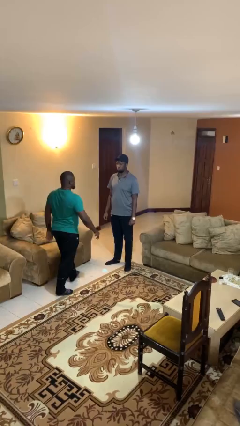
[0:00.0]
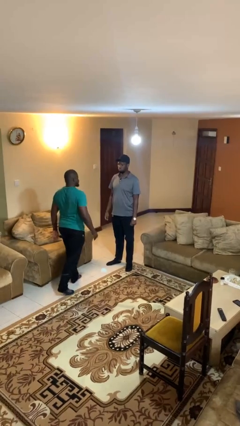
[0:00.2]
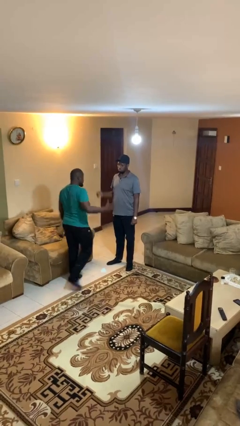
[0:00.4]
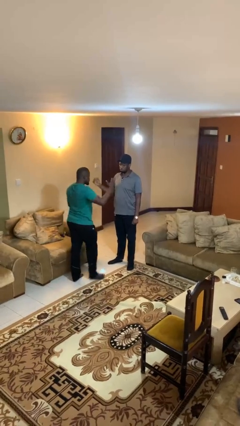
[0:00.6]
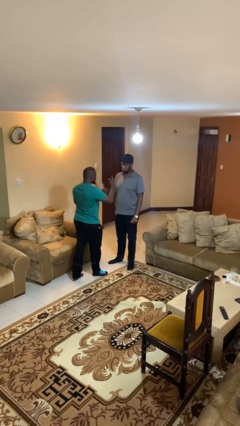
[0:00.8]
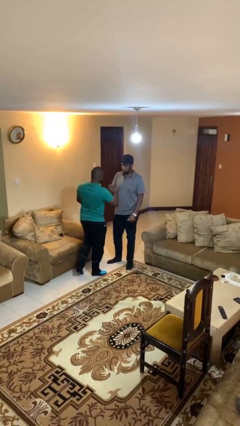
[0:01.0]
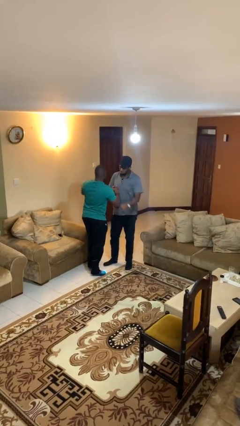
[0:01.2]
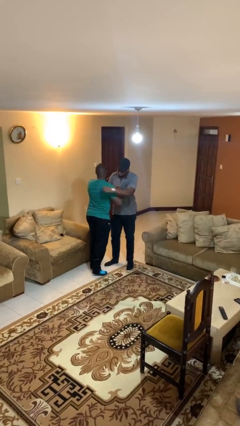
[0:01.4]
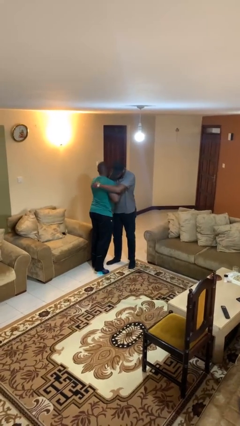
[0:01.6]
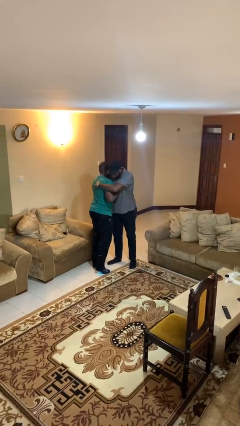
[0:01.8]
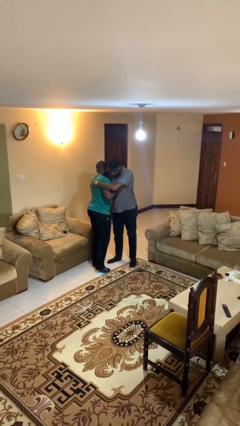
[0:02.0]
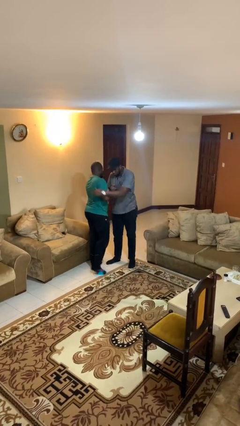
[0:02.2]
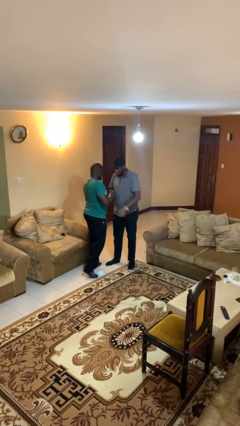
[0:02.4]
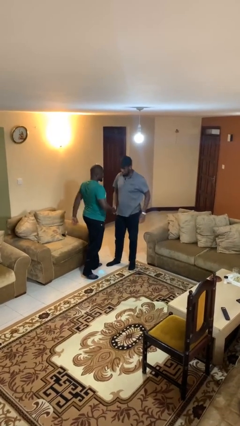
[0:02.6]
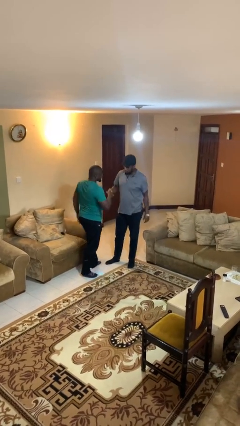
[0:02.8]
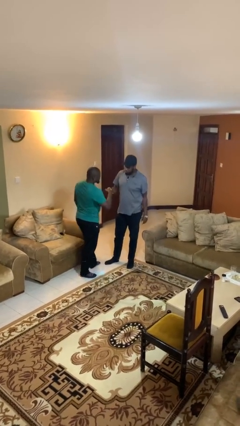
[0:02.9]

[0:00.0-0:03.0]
person embraces person

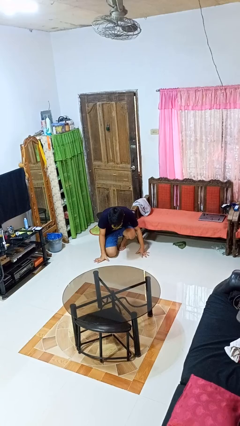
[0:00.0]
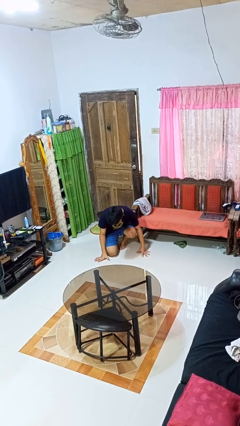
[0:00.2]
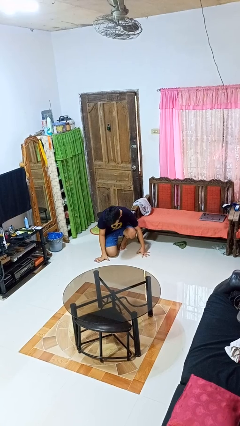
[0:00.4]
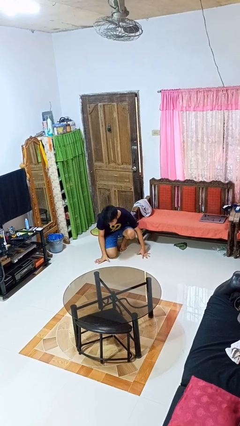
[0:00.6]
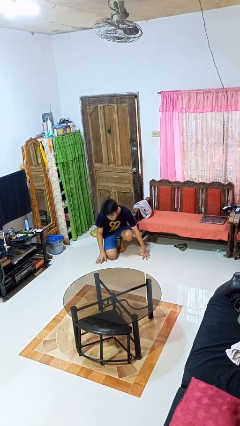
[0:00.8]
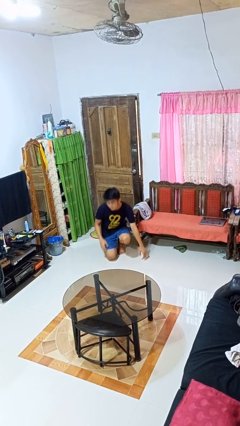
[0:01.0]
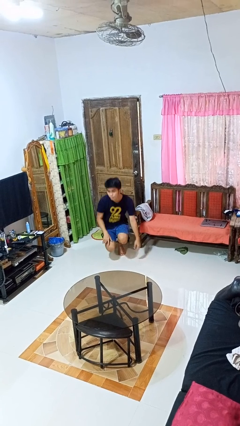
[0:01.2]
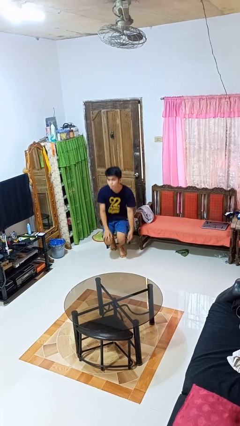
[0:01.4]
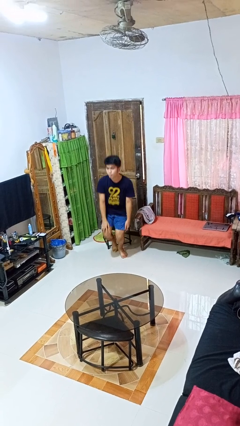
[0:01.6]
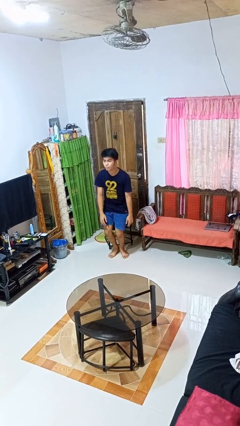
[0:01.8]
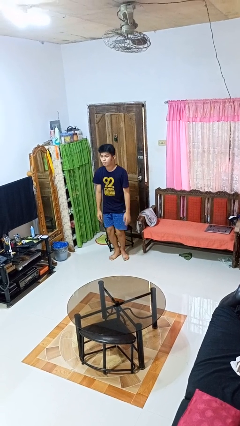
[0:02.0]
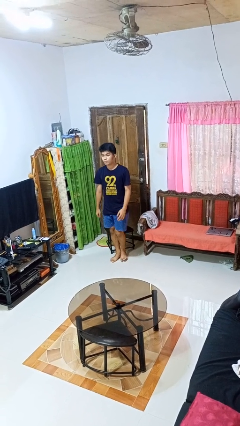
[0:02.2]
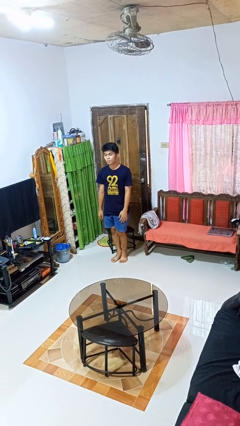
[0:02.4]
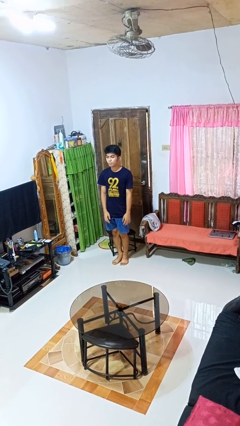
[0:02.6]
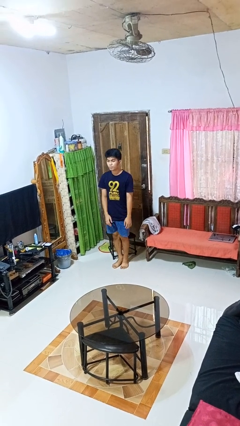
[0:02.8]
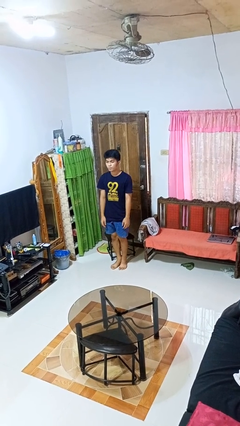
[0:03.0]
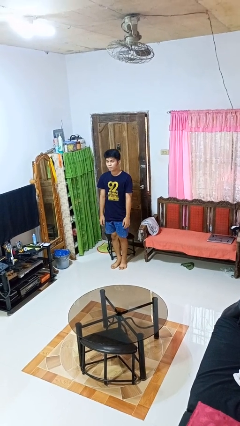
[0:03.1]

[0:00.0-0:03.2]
person stands up from floor

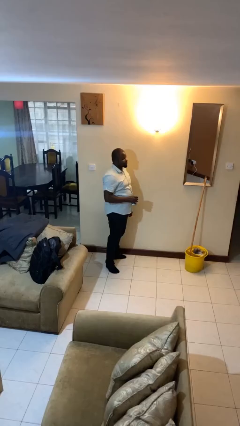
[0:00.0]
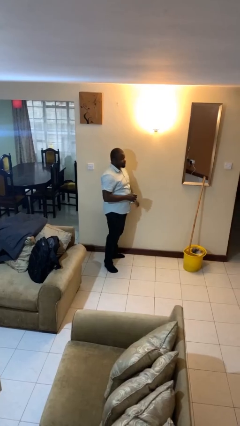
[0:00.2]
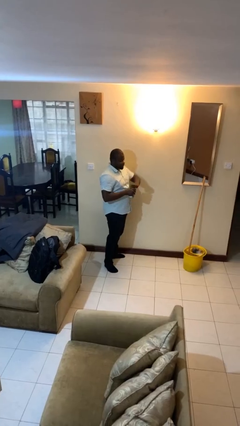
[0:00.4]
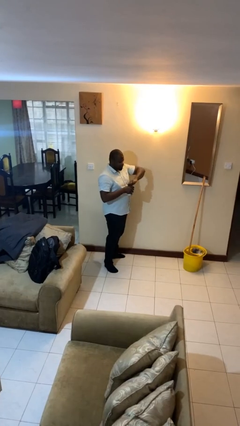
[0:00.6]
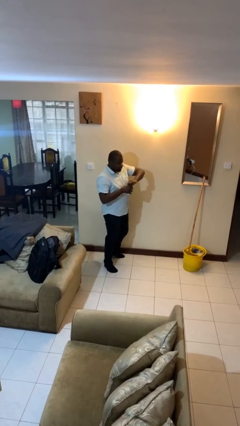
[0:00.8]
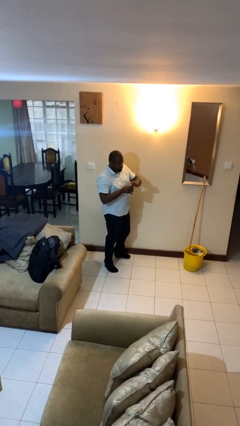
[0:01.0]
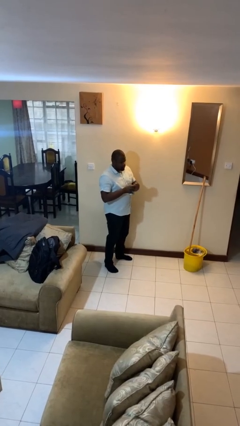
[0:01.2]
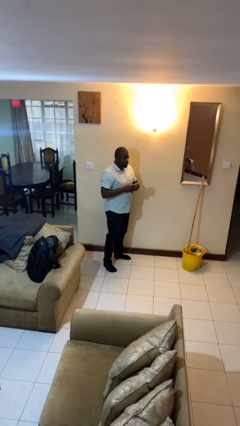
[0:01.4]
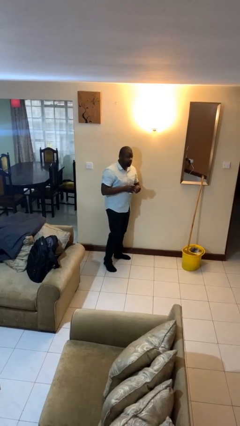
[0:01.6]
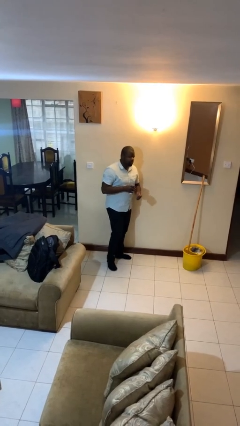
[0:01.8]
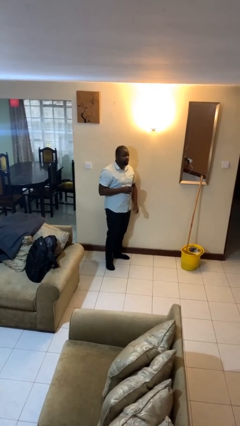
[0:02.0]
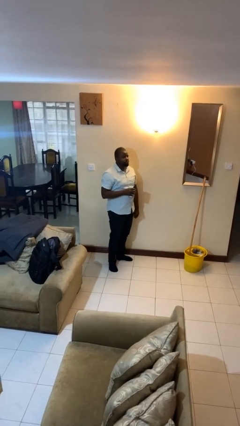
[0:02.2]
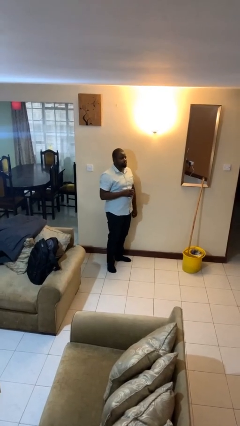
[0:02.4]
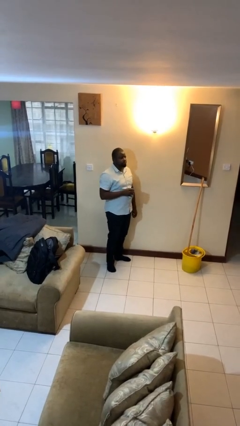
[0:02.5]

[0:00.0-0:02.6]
person opens beverage can

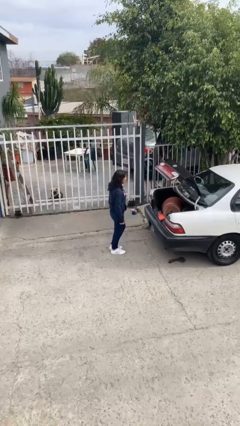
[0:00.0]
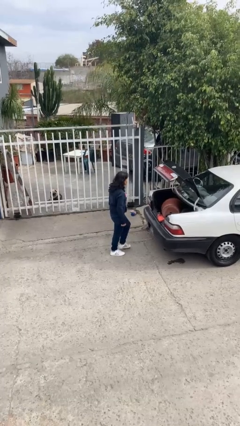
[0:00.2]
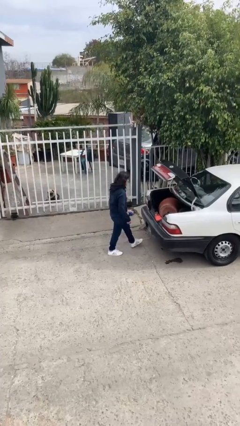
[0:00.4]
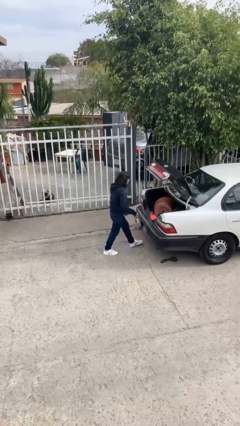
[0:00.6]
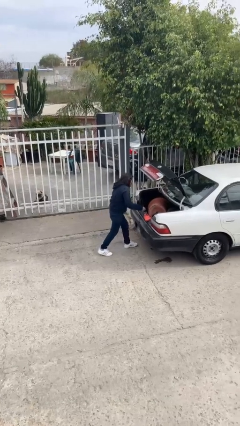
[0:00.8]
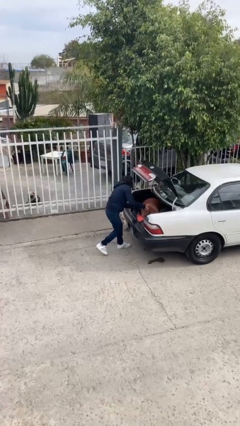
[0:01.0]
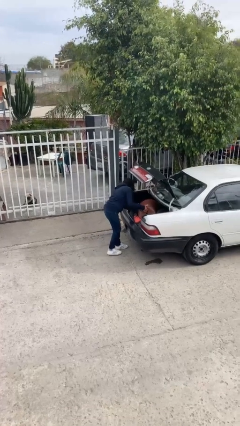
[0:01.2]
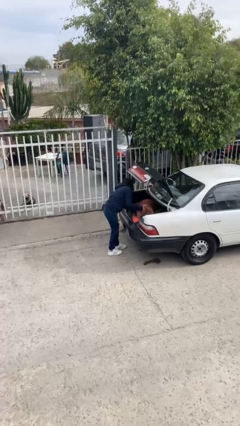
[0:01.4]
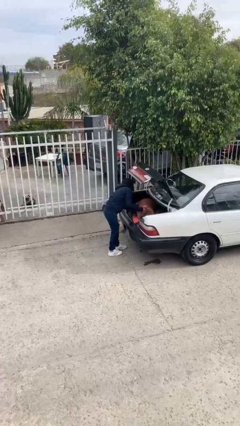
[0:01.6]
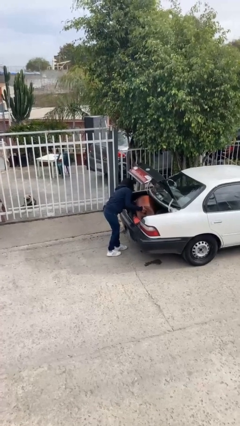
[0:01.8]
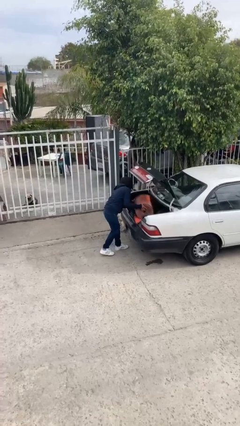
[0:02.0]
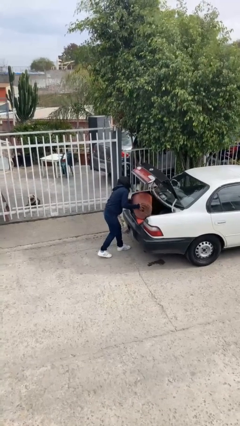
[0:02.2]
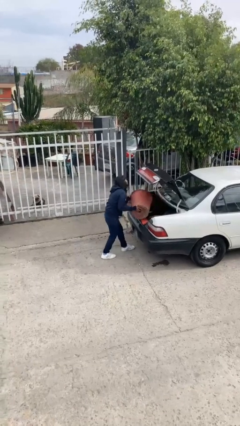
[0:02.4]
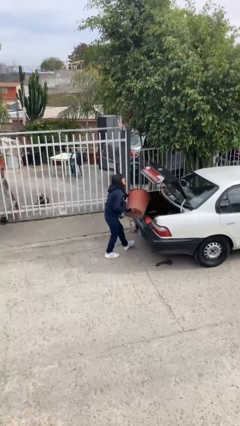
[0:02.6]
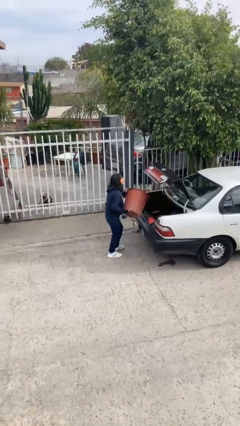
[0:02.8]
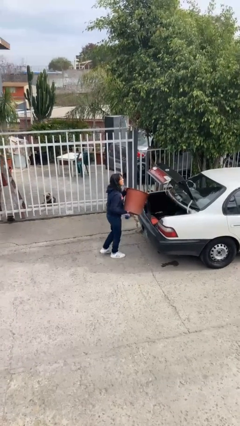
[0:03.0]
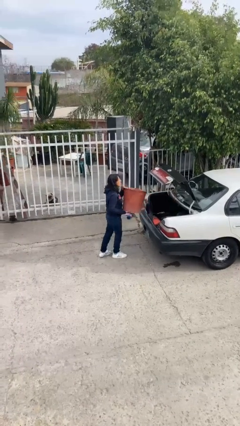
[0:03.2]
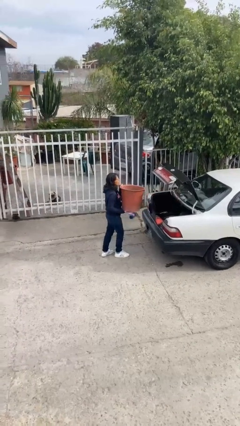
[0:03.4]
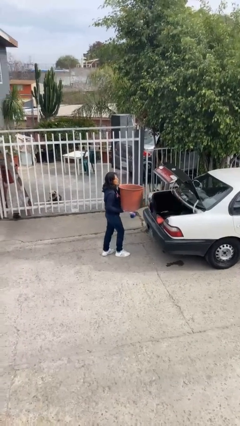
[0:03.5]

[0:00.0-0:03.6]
person unloads car

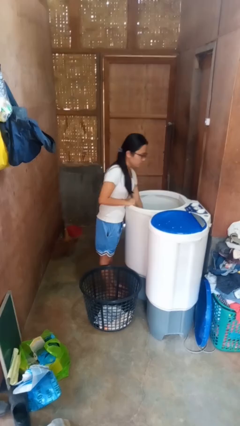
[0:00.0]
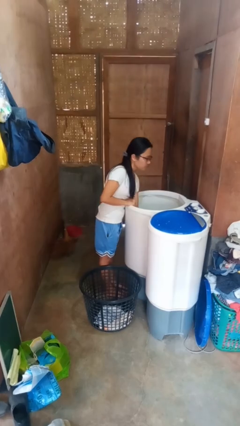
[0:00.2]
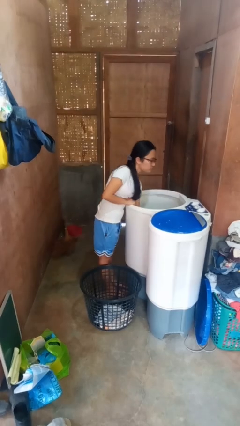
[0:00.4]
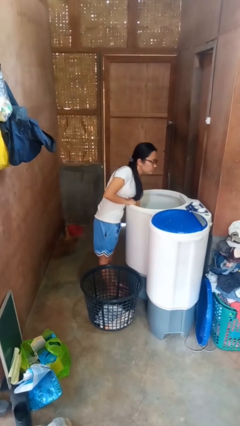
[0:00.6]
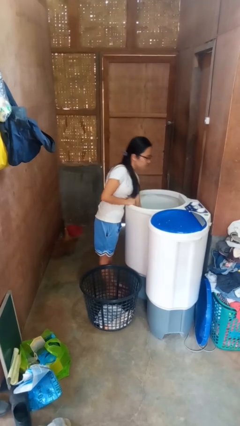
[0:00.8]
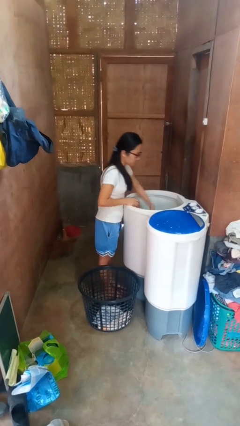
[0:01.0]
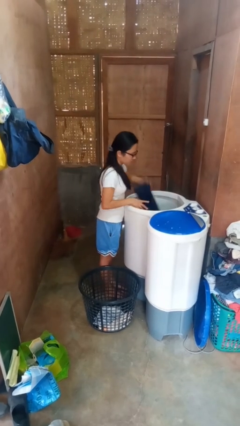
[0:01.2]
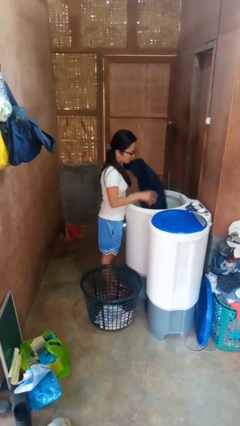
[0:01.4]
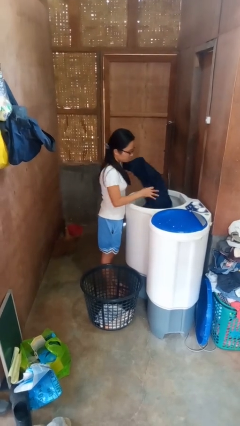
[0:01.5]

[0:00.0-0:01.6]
person unloads clotheswasher

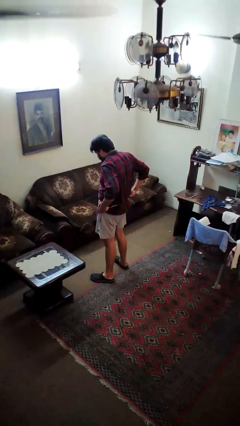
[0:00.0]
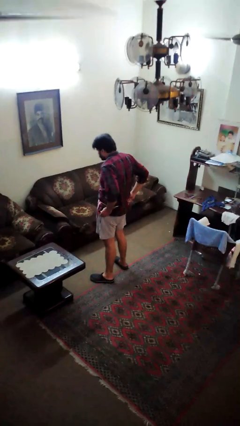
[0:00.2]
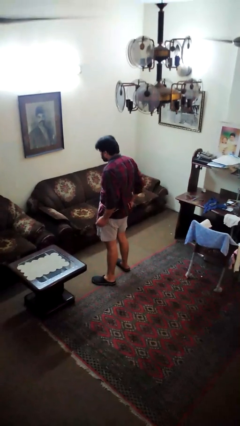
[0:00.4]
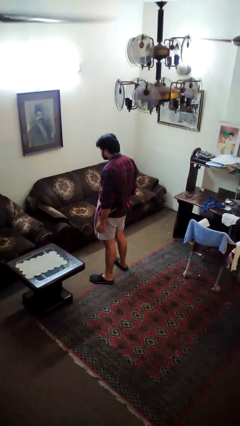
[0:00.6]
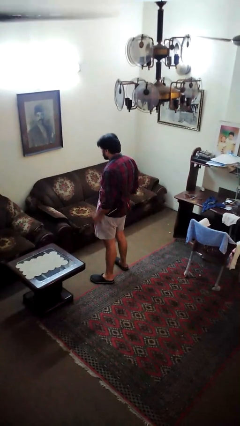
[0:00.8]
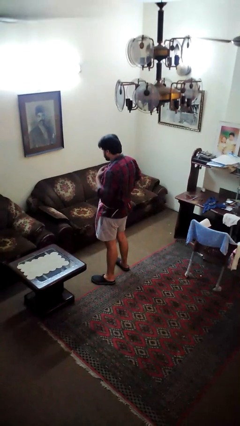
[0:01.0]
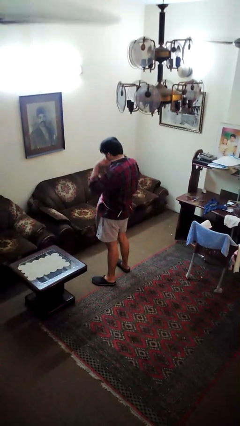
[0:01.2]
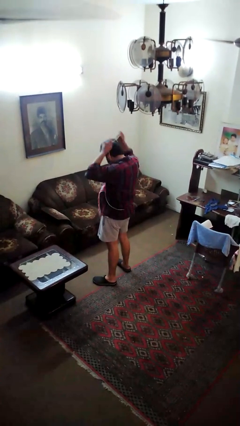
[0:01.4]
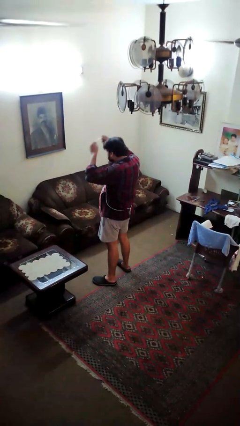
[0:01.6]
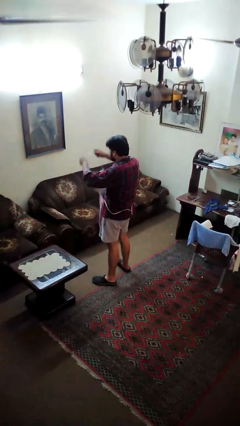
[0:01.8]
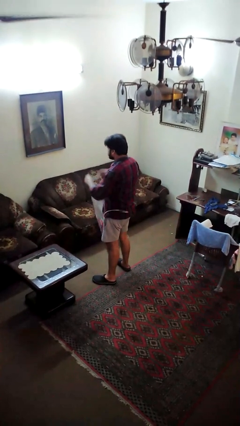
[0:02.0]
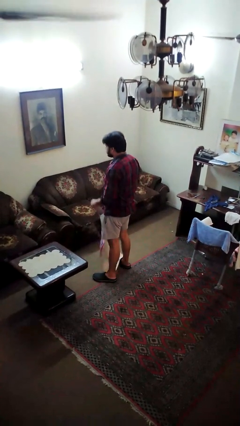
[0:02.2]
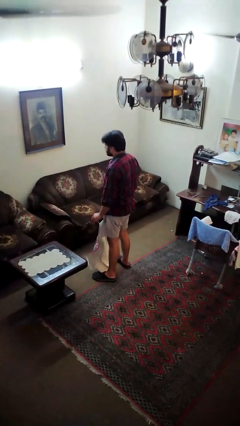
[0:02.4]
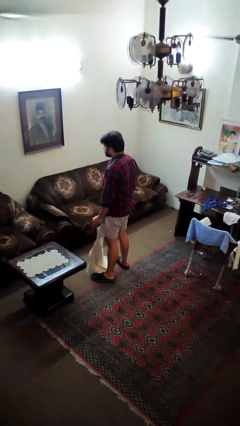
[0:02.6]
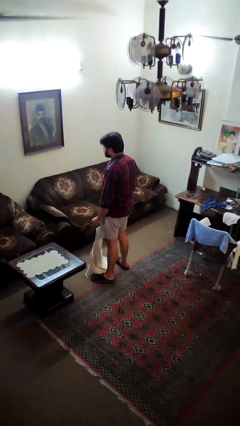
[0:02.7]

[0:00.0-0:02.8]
person takes off apron

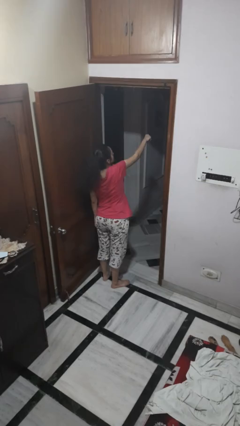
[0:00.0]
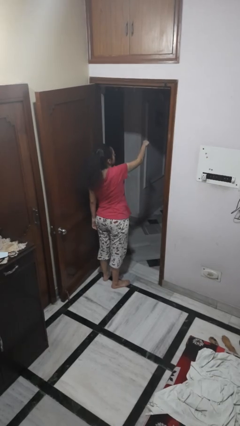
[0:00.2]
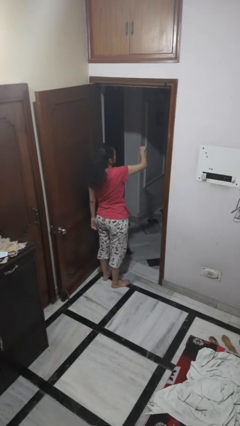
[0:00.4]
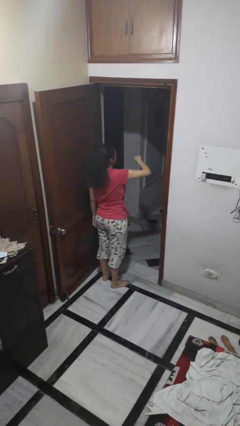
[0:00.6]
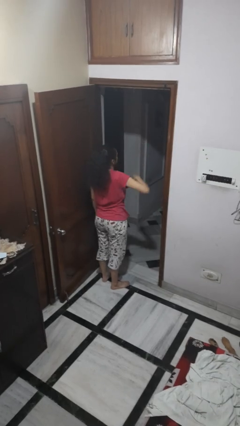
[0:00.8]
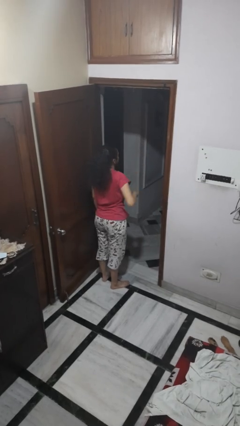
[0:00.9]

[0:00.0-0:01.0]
person punches
